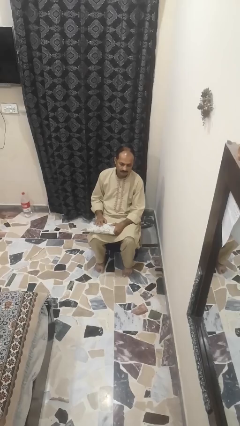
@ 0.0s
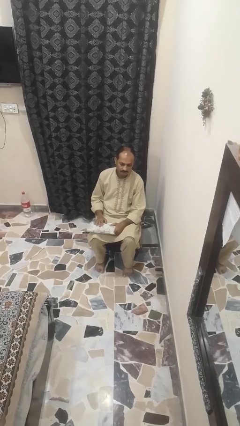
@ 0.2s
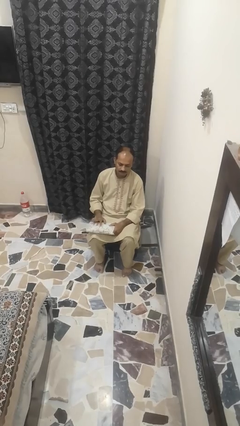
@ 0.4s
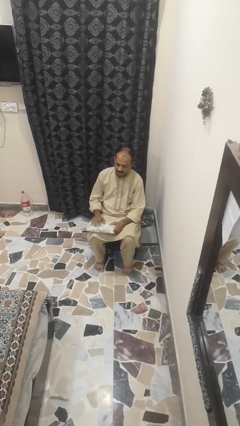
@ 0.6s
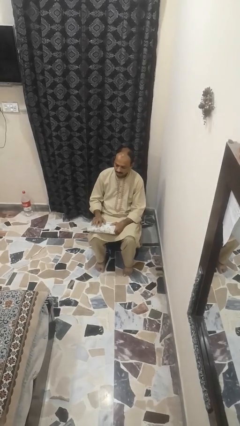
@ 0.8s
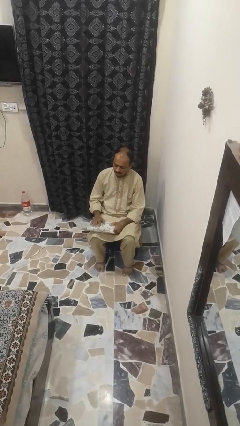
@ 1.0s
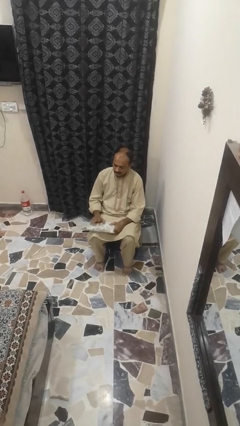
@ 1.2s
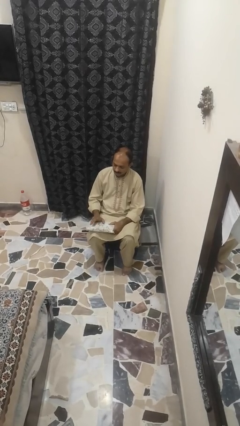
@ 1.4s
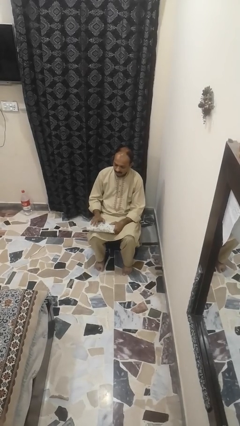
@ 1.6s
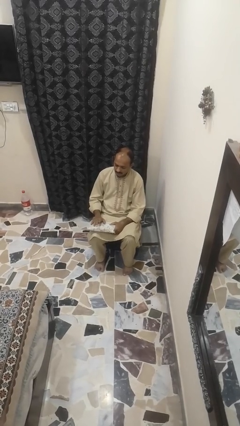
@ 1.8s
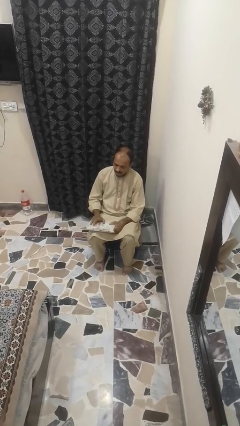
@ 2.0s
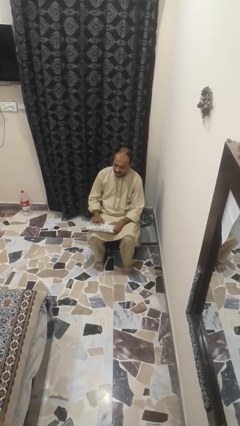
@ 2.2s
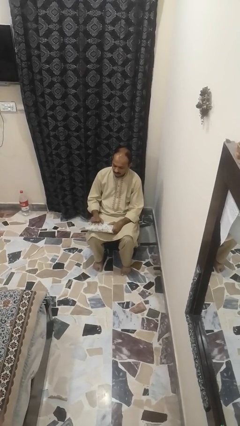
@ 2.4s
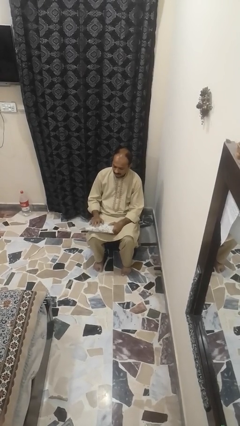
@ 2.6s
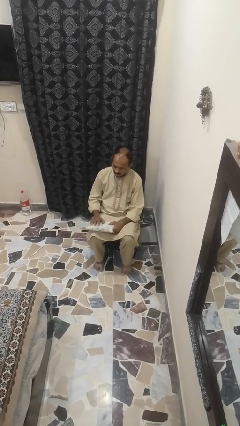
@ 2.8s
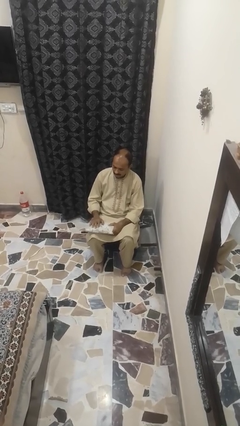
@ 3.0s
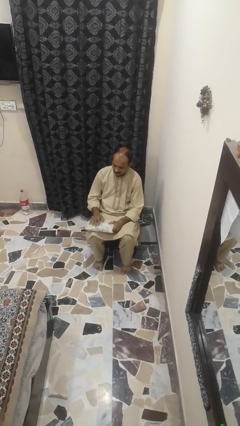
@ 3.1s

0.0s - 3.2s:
person taps object with finger

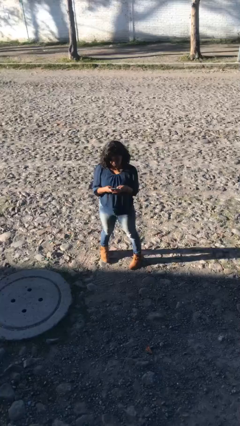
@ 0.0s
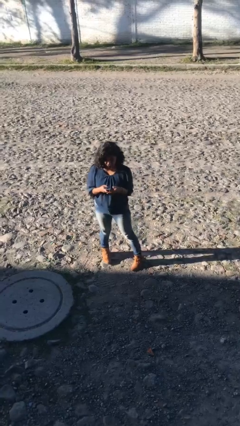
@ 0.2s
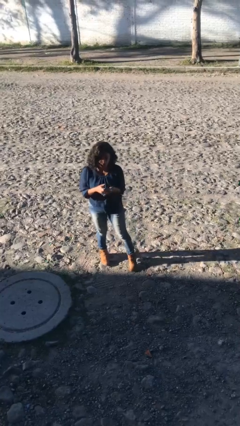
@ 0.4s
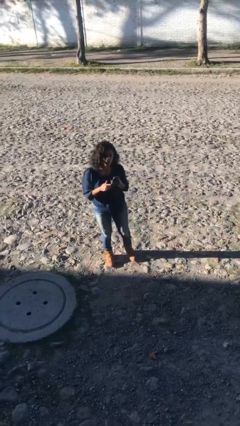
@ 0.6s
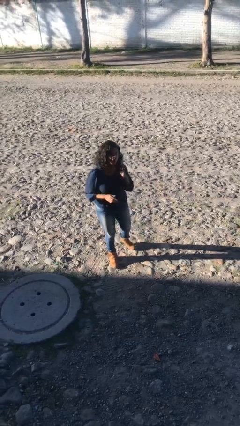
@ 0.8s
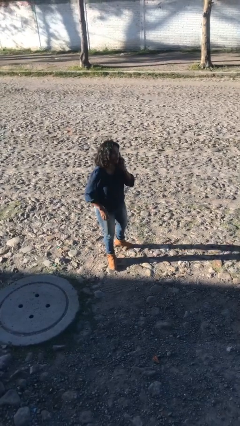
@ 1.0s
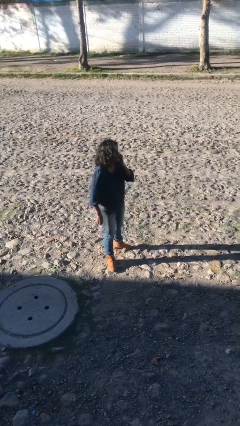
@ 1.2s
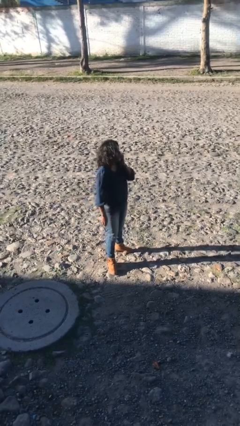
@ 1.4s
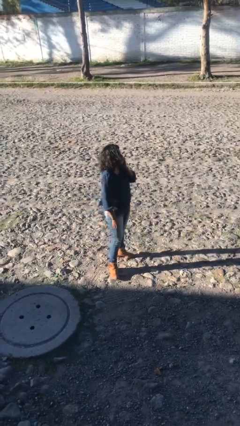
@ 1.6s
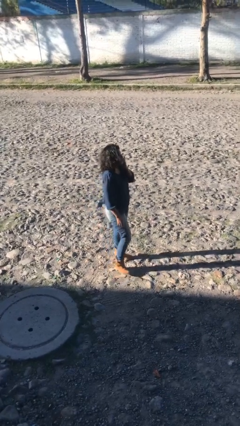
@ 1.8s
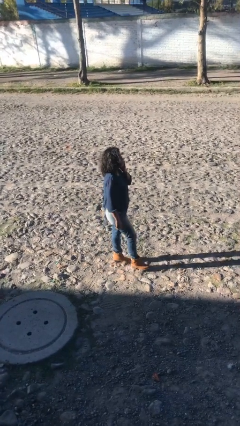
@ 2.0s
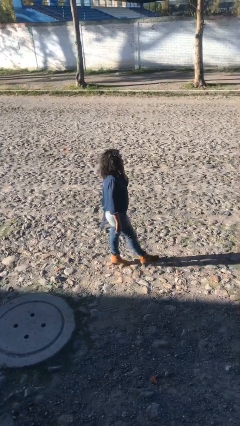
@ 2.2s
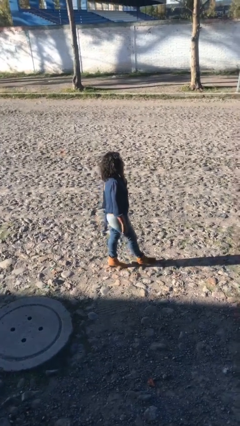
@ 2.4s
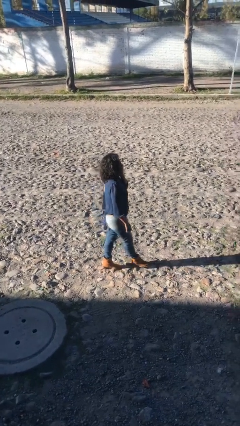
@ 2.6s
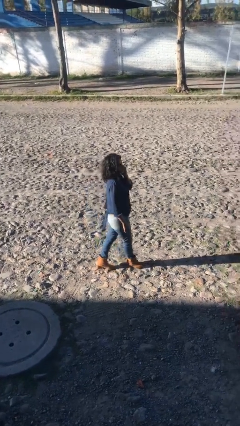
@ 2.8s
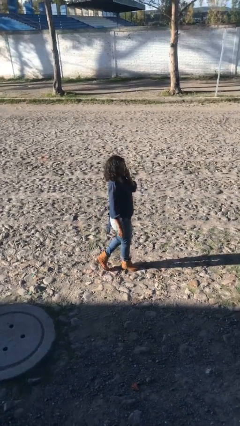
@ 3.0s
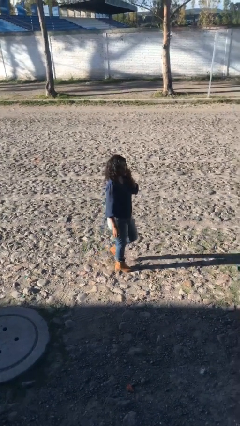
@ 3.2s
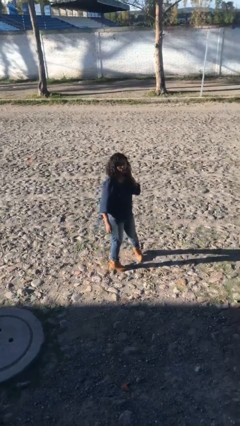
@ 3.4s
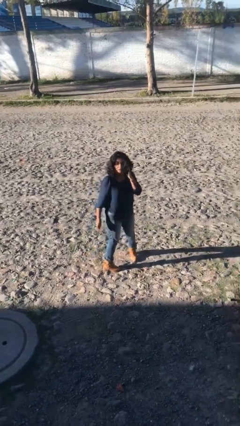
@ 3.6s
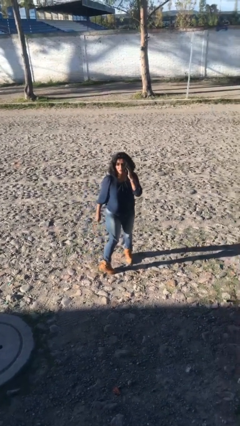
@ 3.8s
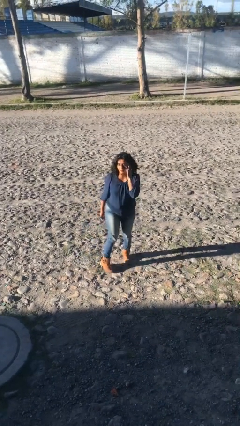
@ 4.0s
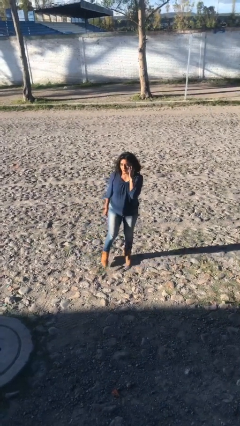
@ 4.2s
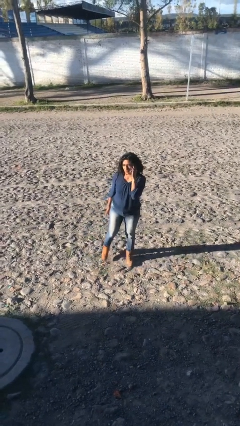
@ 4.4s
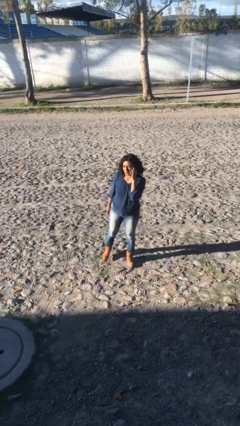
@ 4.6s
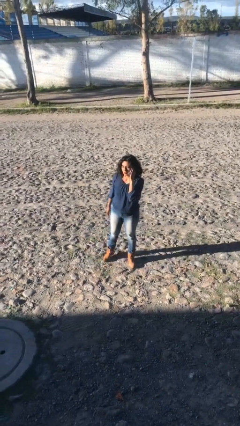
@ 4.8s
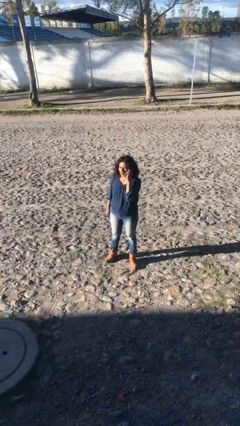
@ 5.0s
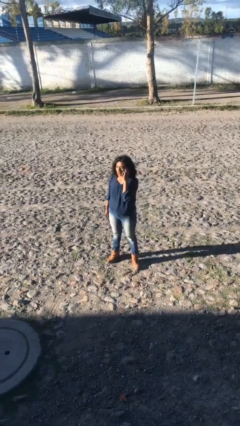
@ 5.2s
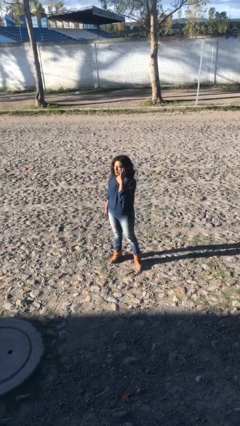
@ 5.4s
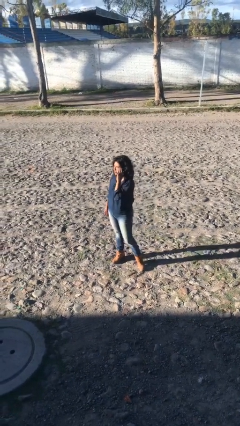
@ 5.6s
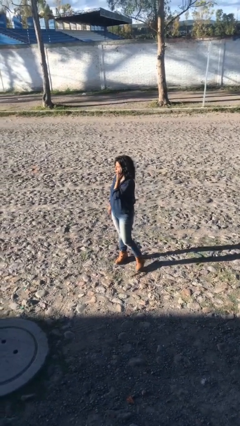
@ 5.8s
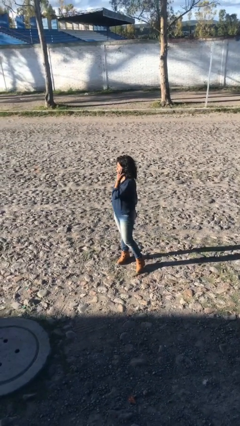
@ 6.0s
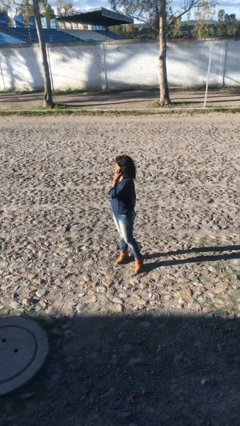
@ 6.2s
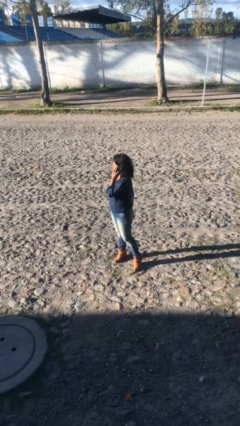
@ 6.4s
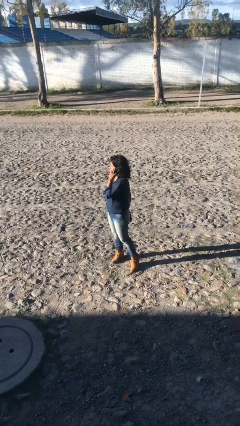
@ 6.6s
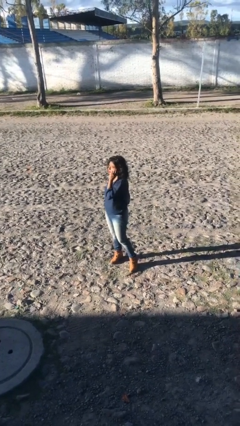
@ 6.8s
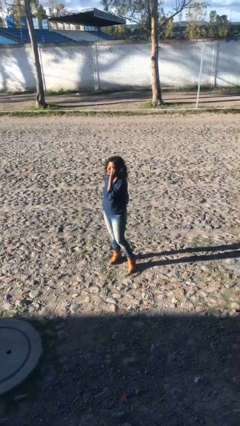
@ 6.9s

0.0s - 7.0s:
person talks on phone

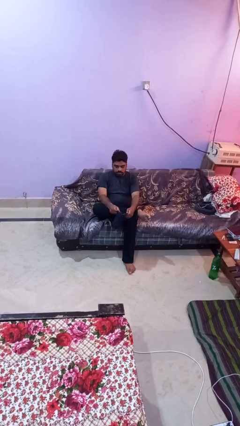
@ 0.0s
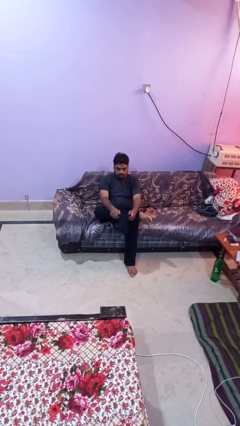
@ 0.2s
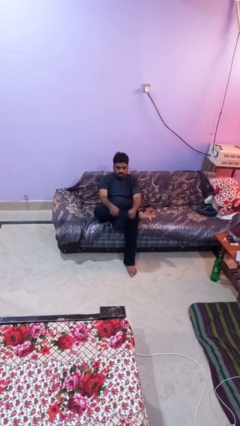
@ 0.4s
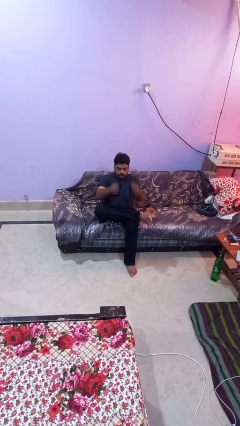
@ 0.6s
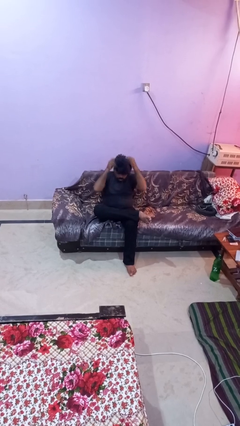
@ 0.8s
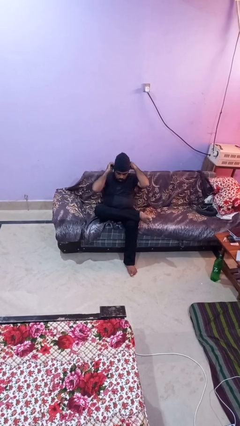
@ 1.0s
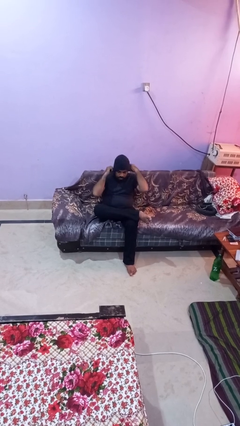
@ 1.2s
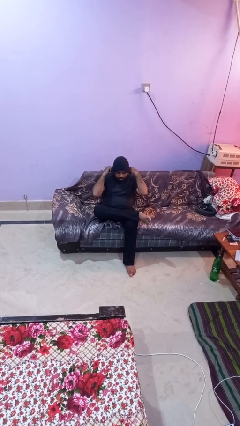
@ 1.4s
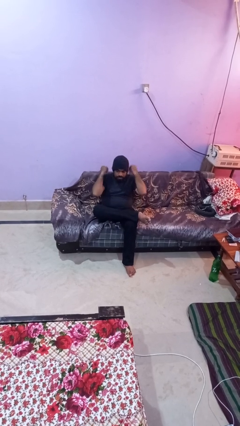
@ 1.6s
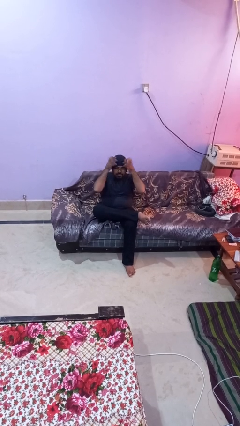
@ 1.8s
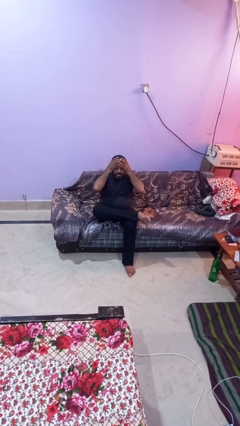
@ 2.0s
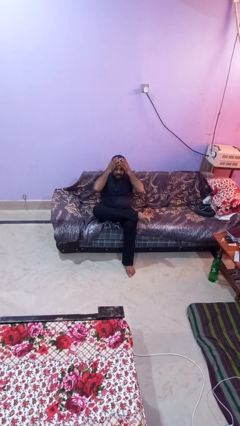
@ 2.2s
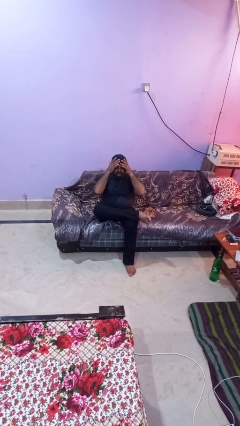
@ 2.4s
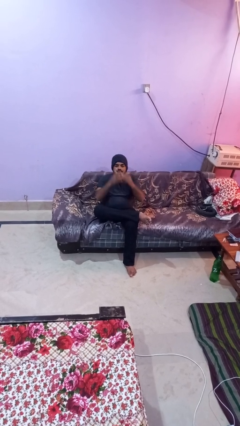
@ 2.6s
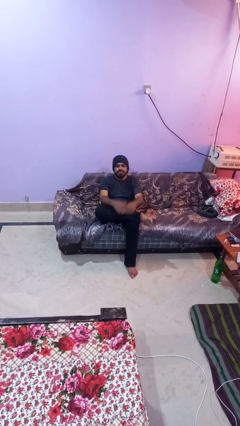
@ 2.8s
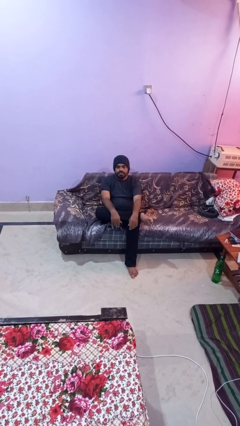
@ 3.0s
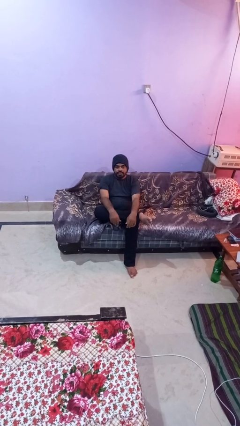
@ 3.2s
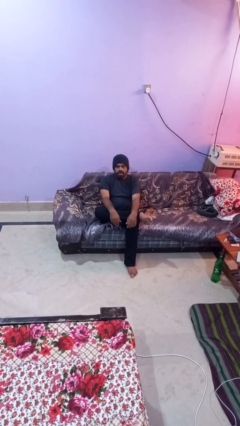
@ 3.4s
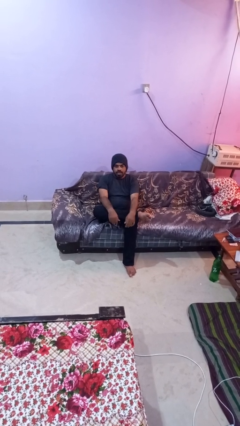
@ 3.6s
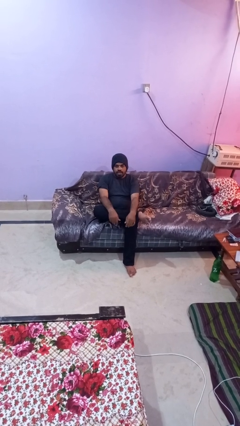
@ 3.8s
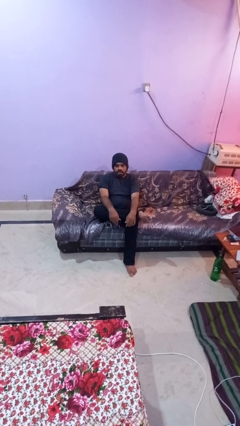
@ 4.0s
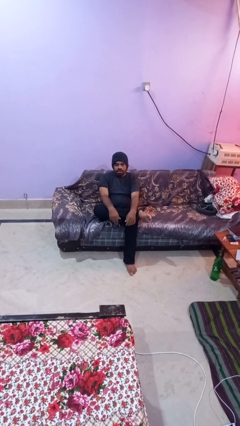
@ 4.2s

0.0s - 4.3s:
person puts on hat

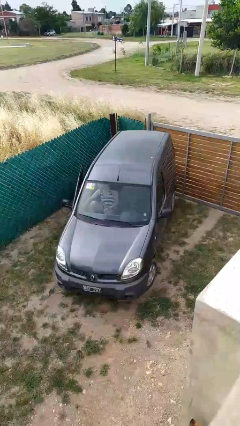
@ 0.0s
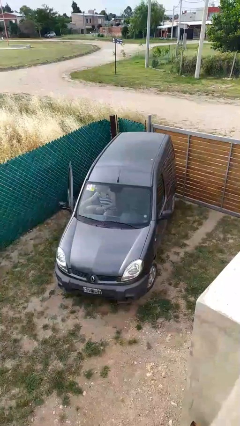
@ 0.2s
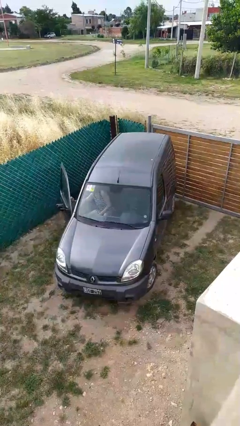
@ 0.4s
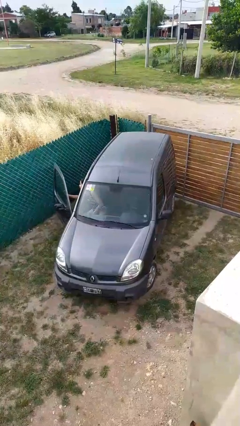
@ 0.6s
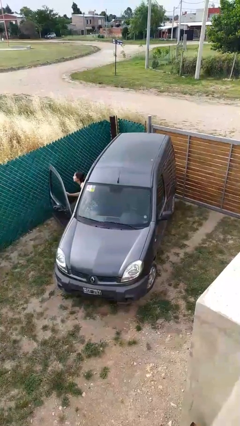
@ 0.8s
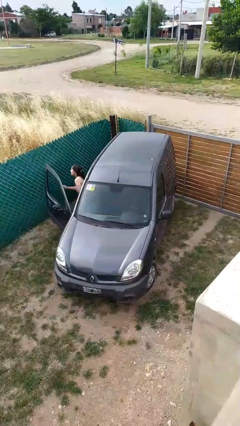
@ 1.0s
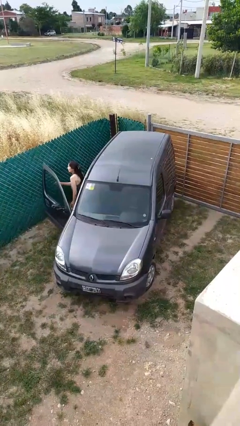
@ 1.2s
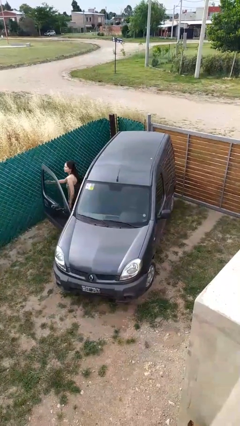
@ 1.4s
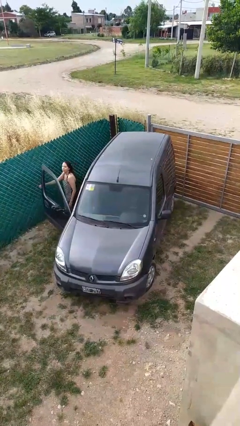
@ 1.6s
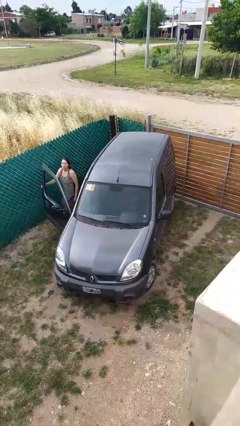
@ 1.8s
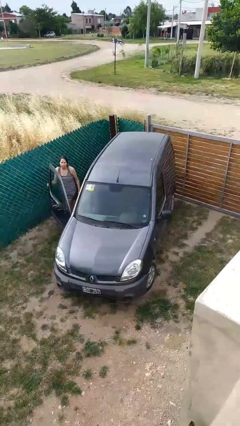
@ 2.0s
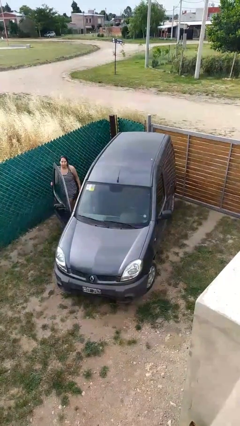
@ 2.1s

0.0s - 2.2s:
car drops off person

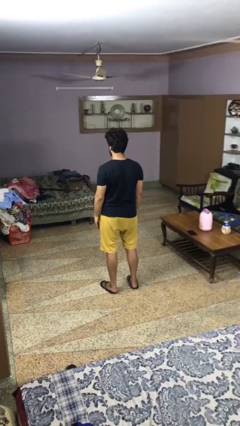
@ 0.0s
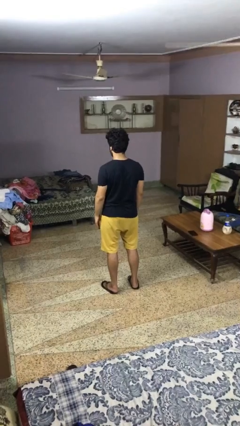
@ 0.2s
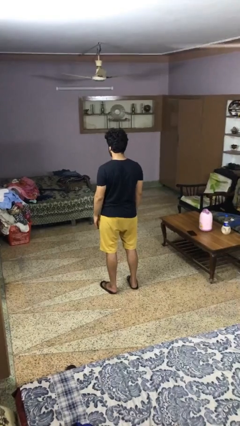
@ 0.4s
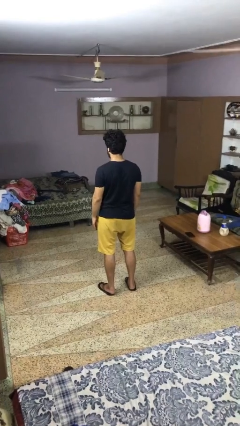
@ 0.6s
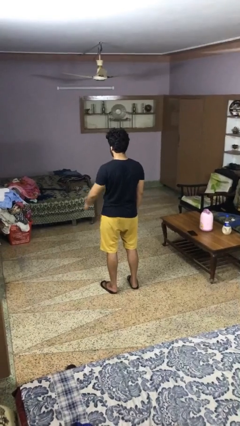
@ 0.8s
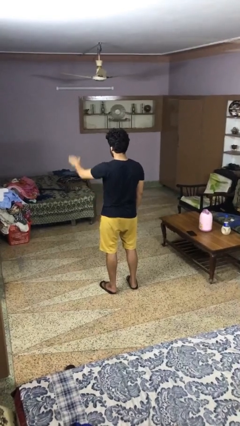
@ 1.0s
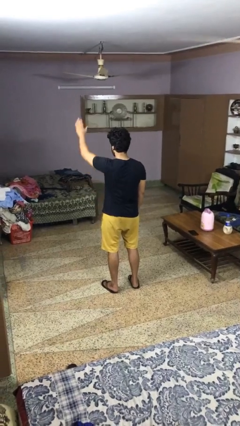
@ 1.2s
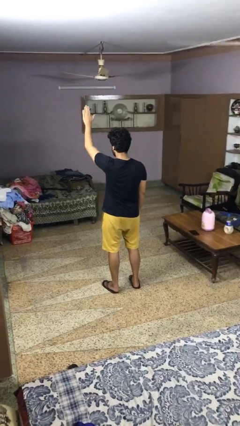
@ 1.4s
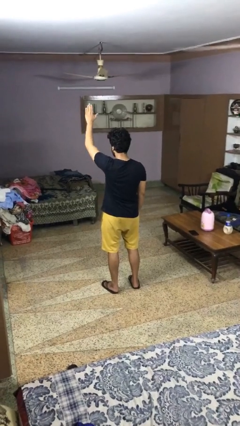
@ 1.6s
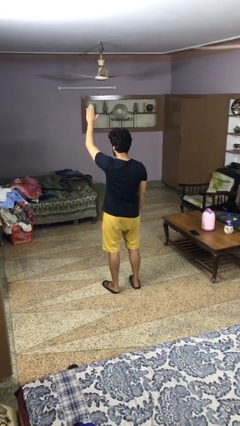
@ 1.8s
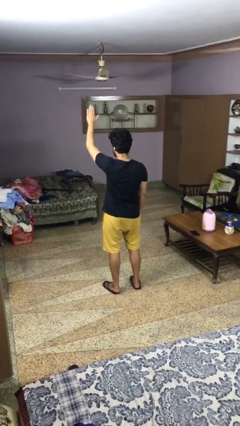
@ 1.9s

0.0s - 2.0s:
person gestures raise hand
